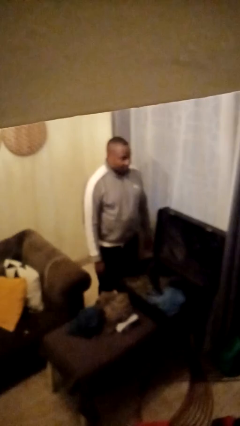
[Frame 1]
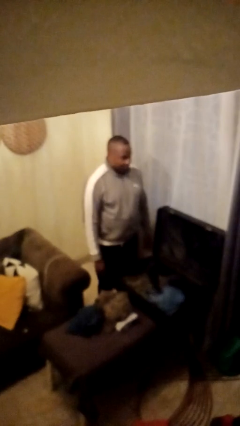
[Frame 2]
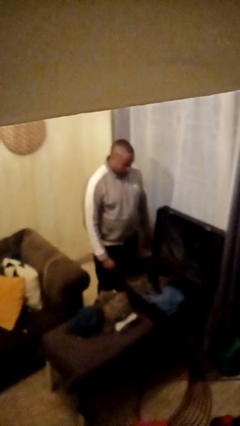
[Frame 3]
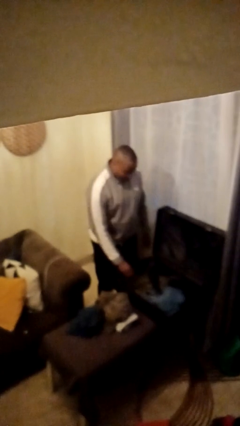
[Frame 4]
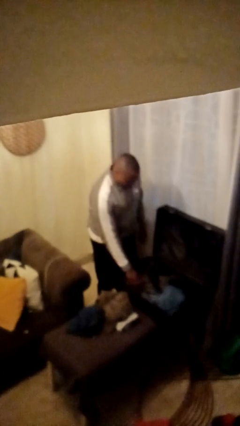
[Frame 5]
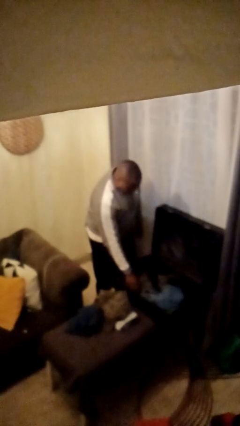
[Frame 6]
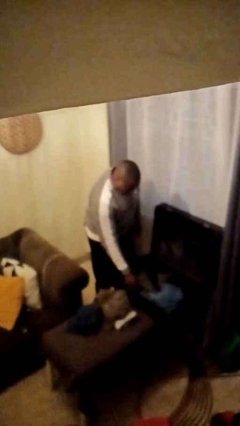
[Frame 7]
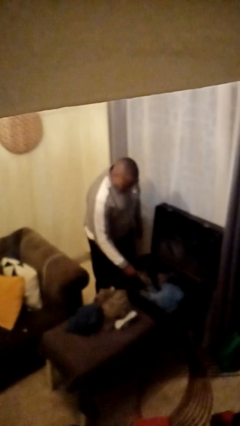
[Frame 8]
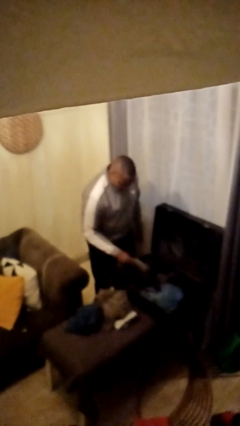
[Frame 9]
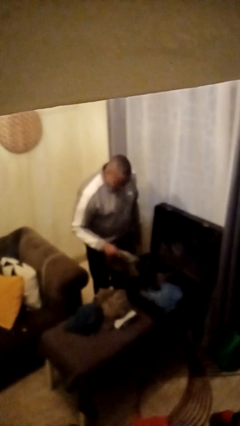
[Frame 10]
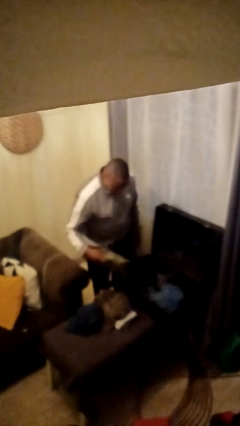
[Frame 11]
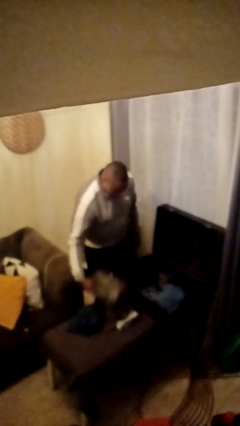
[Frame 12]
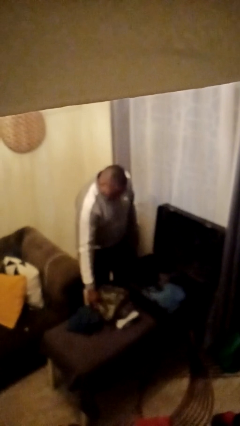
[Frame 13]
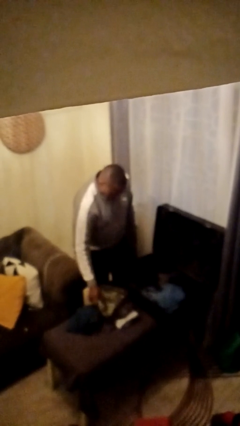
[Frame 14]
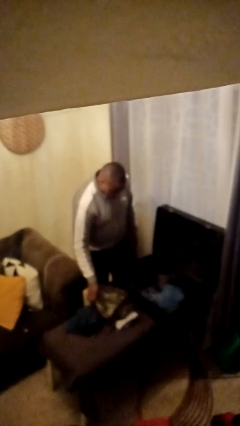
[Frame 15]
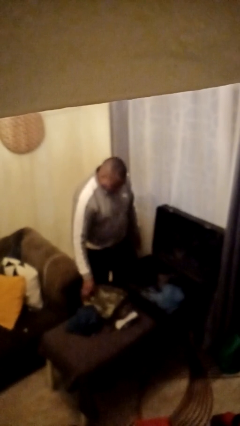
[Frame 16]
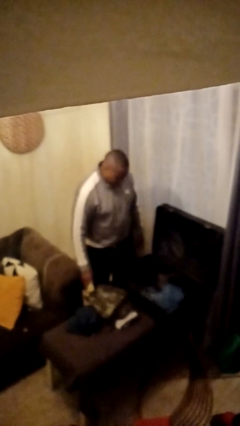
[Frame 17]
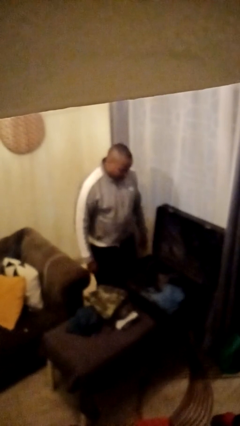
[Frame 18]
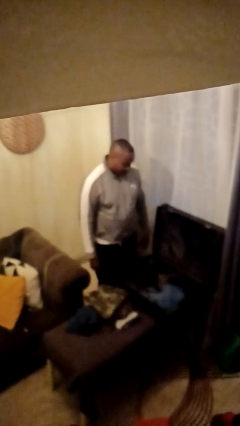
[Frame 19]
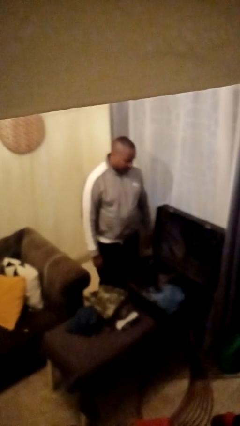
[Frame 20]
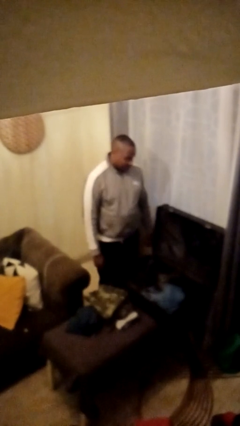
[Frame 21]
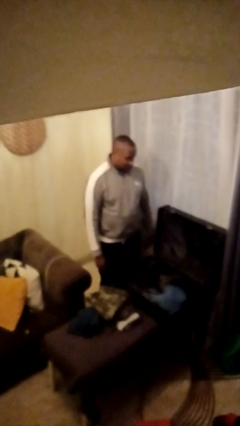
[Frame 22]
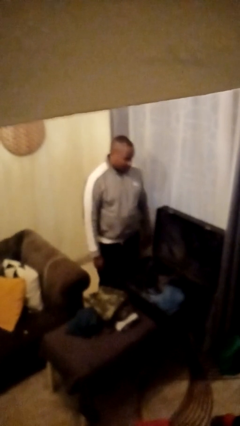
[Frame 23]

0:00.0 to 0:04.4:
person unloads clothes from suitcase

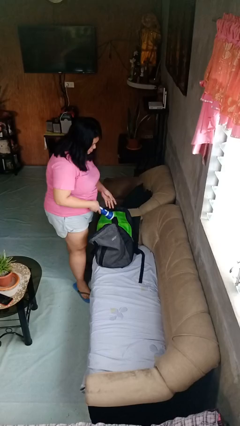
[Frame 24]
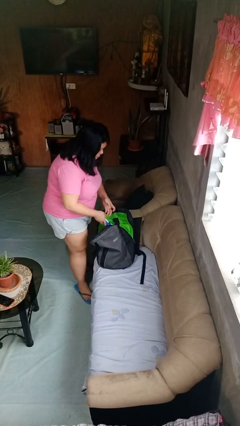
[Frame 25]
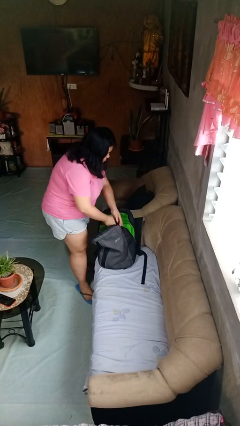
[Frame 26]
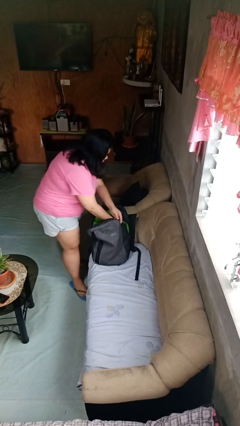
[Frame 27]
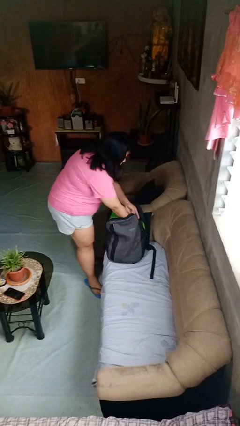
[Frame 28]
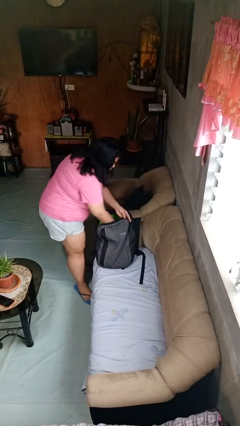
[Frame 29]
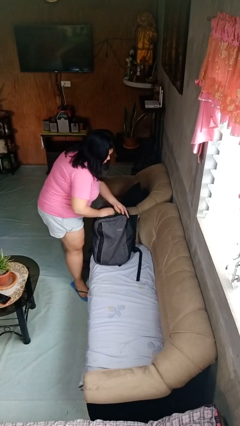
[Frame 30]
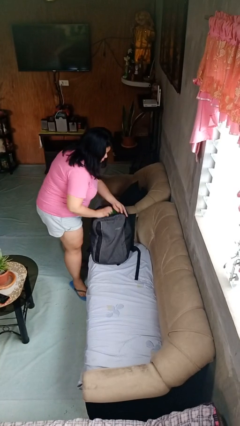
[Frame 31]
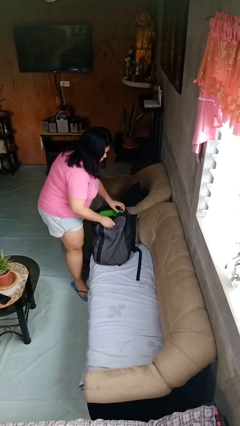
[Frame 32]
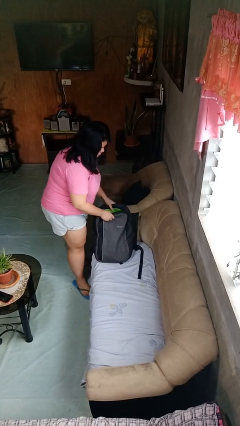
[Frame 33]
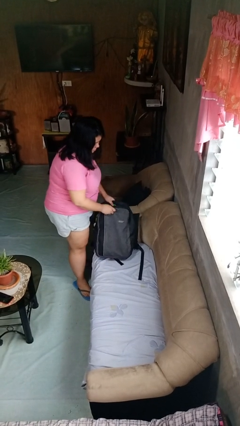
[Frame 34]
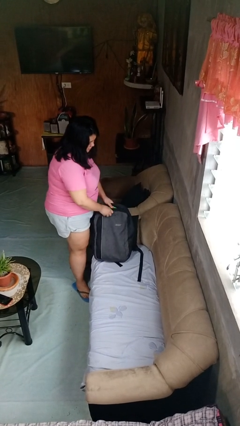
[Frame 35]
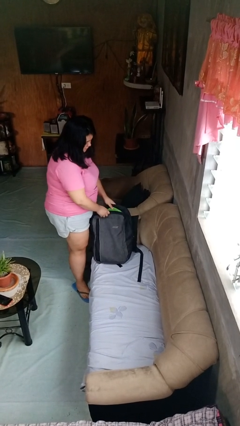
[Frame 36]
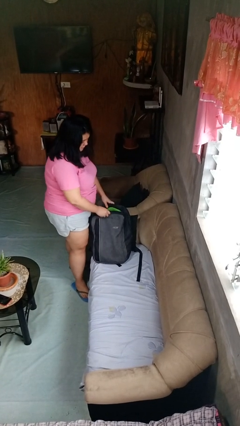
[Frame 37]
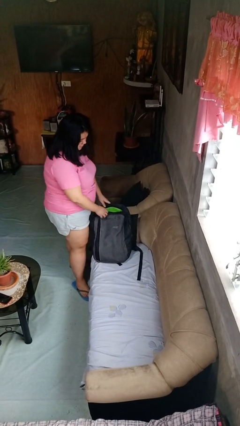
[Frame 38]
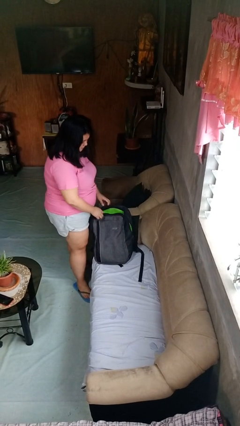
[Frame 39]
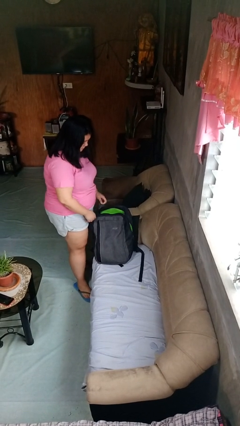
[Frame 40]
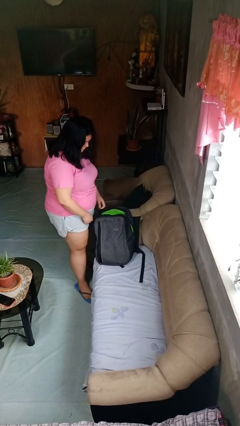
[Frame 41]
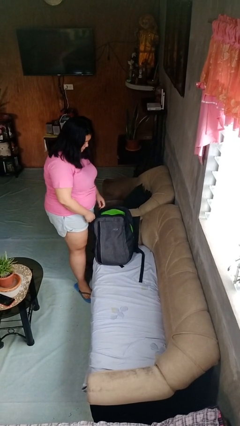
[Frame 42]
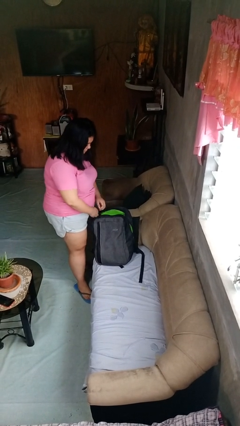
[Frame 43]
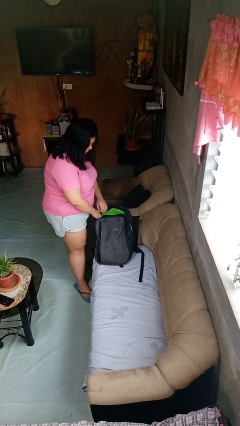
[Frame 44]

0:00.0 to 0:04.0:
person puts object into backpack

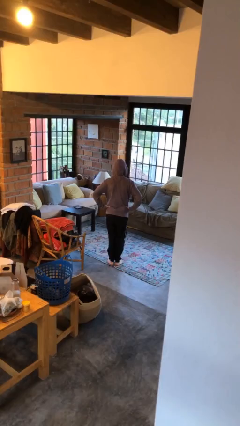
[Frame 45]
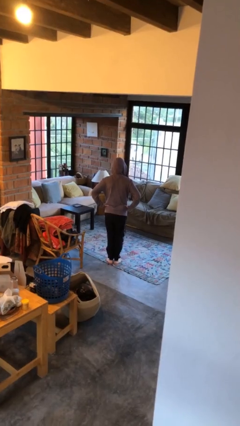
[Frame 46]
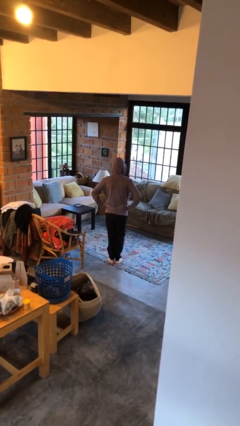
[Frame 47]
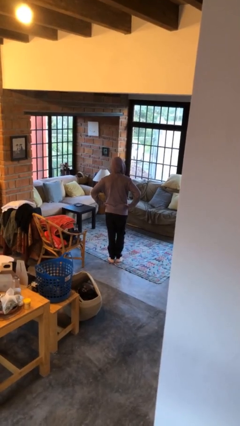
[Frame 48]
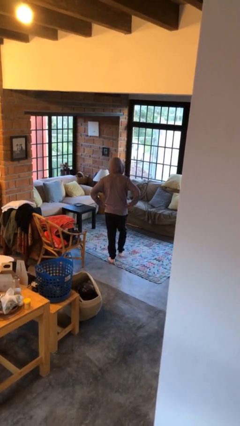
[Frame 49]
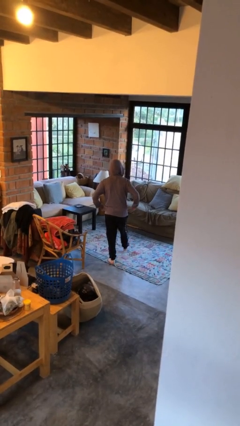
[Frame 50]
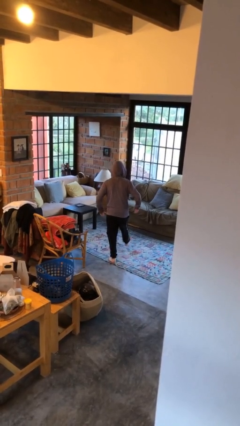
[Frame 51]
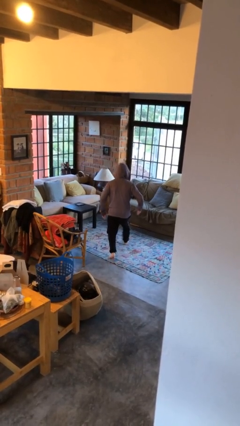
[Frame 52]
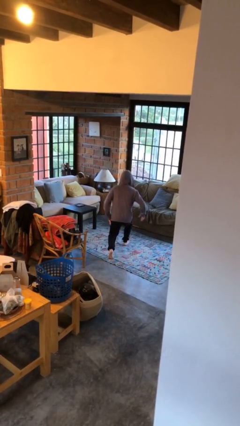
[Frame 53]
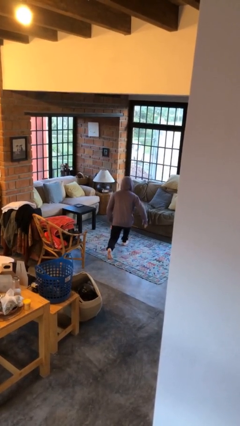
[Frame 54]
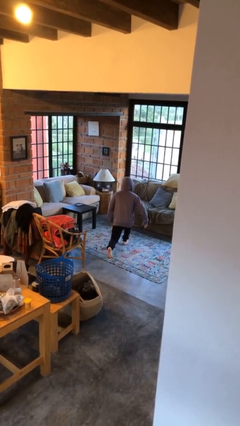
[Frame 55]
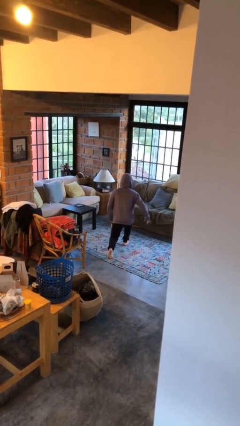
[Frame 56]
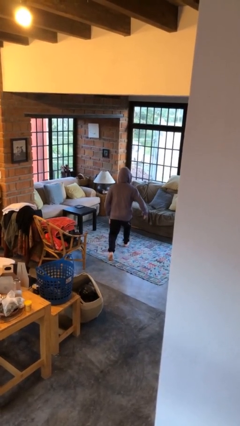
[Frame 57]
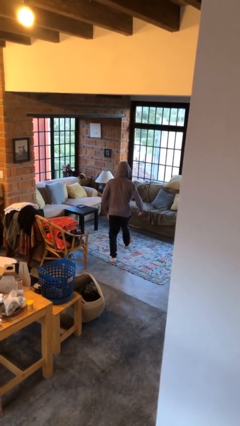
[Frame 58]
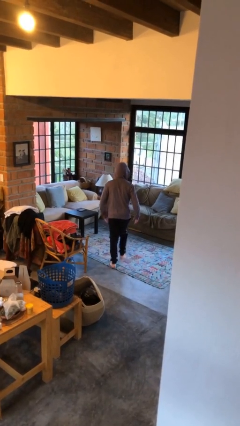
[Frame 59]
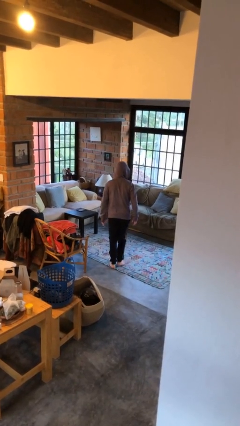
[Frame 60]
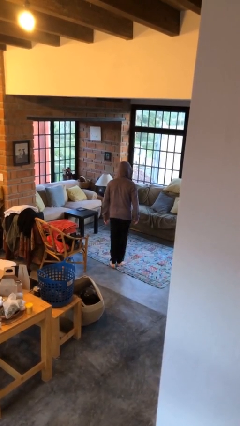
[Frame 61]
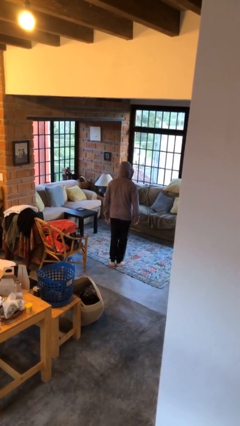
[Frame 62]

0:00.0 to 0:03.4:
person exercises with lunges

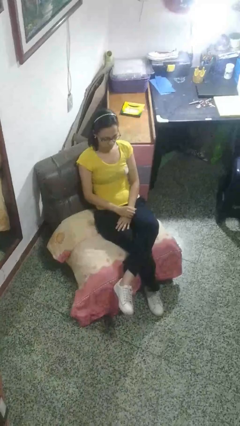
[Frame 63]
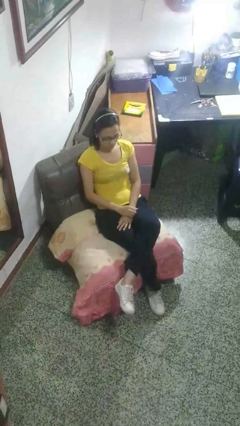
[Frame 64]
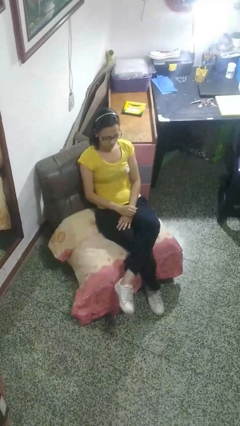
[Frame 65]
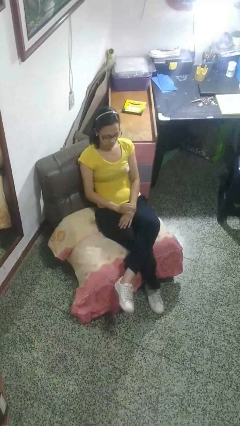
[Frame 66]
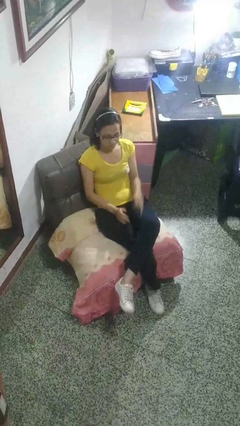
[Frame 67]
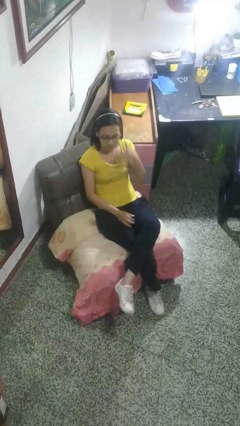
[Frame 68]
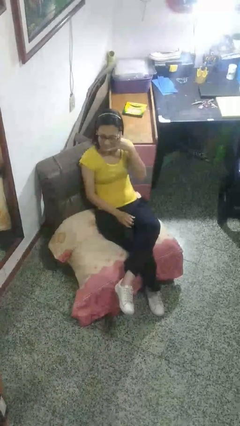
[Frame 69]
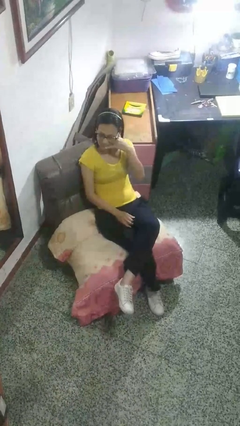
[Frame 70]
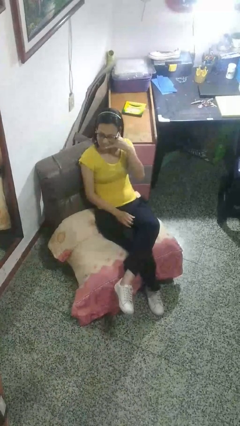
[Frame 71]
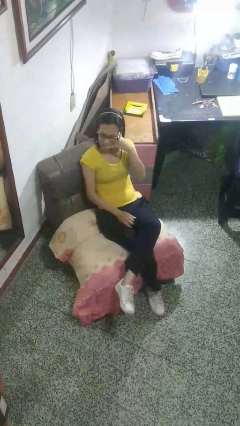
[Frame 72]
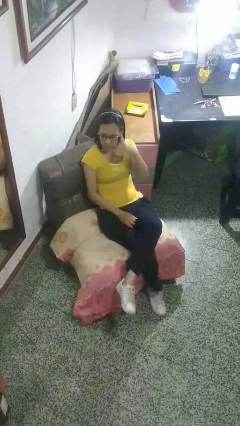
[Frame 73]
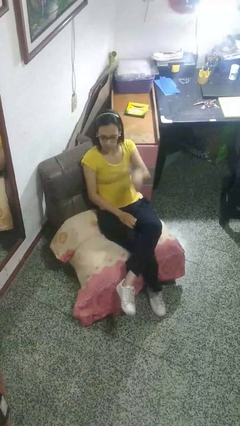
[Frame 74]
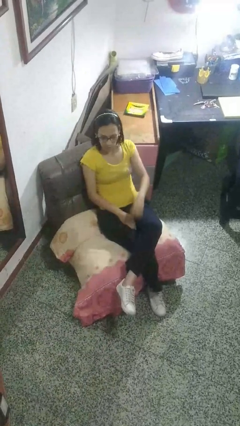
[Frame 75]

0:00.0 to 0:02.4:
person gestures call me

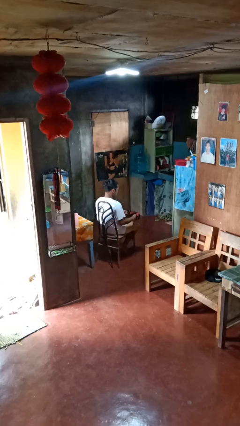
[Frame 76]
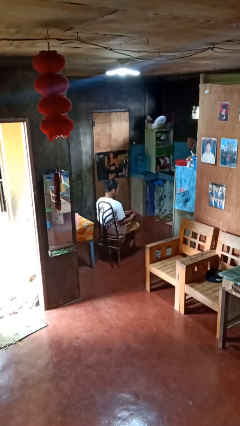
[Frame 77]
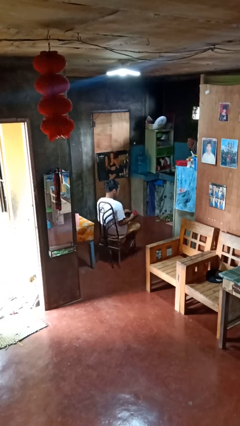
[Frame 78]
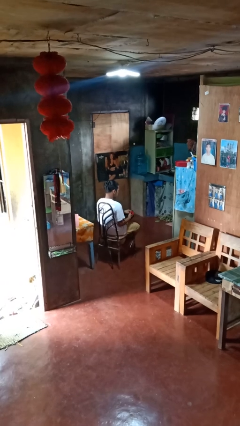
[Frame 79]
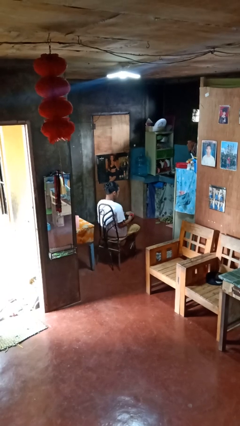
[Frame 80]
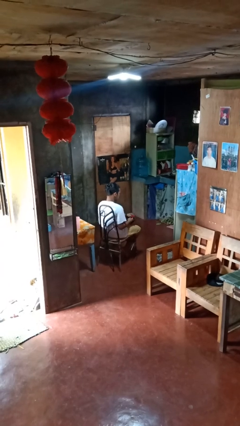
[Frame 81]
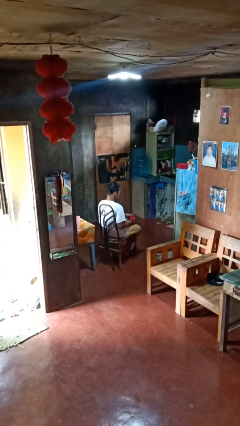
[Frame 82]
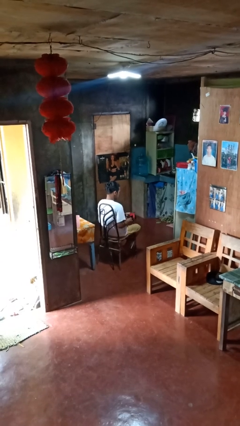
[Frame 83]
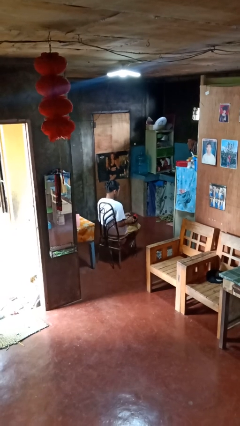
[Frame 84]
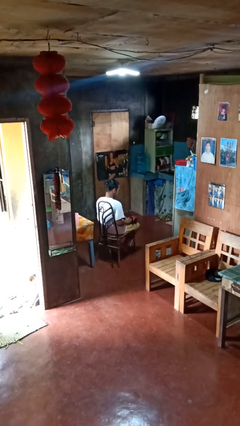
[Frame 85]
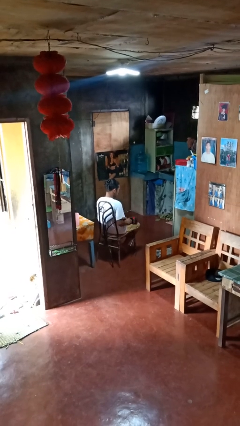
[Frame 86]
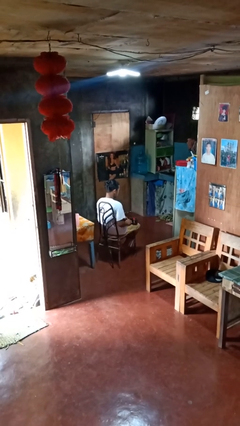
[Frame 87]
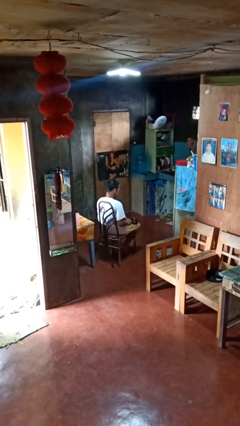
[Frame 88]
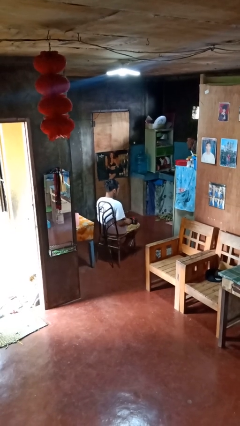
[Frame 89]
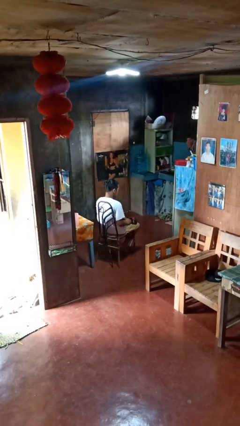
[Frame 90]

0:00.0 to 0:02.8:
person takes off gloves
